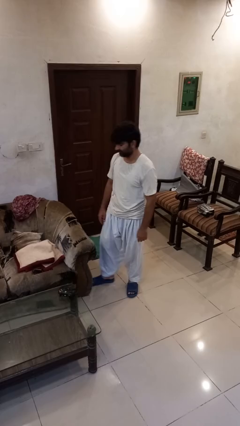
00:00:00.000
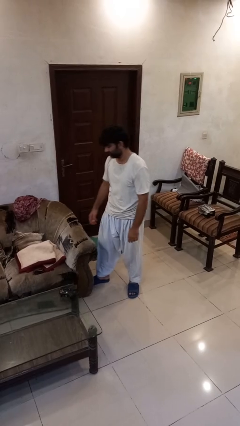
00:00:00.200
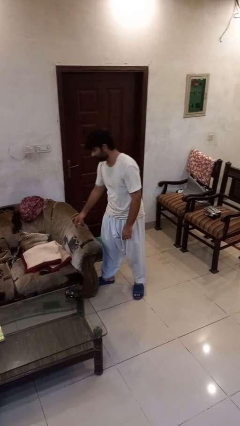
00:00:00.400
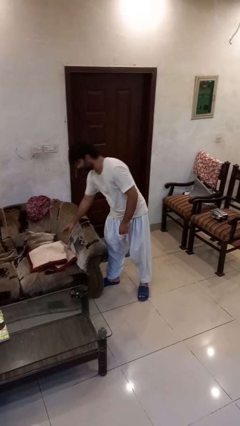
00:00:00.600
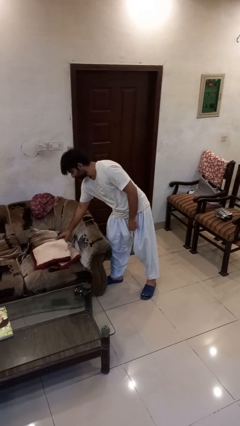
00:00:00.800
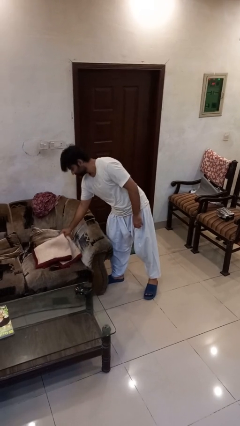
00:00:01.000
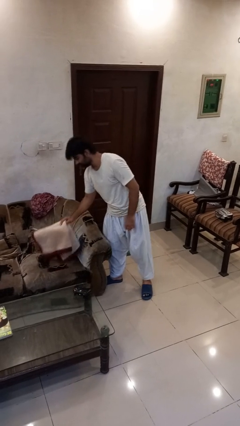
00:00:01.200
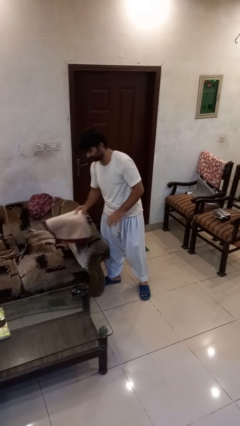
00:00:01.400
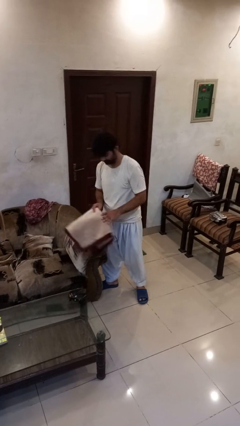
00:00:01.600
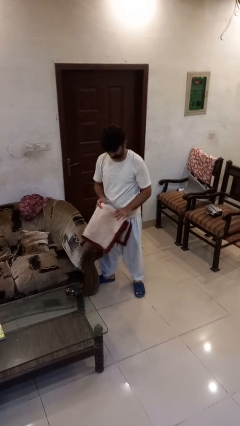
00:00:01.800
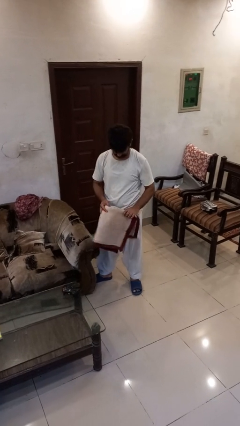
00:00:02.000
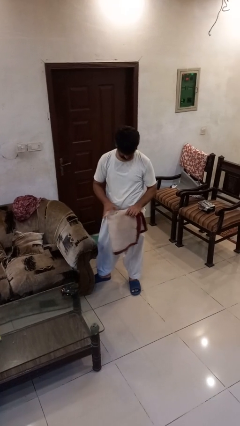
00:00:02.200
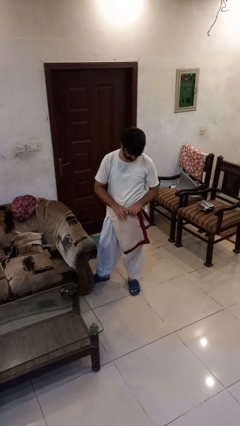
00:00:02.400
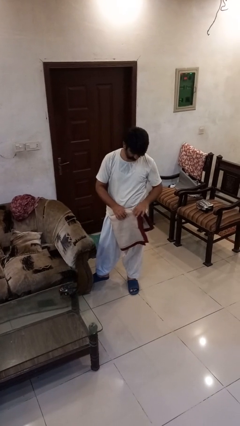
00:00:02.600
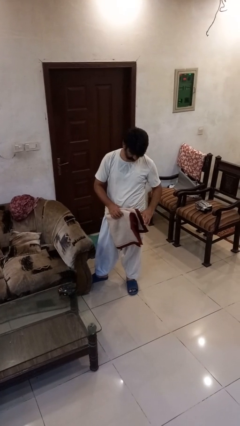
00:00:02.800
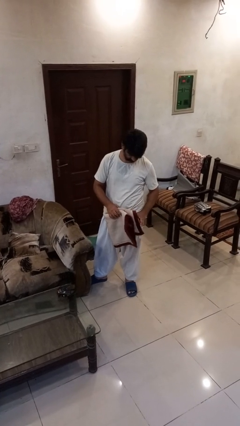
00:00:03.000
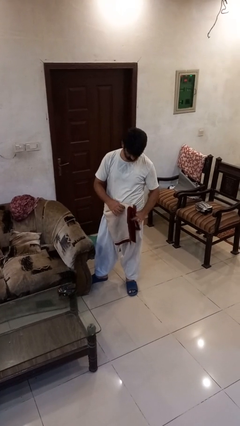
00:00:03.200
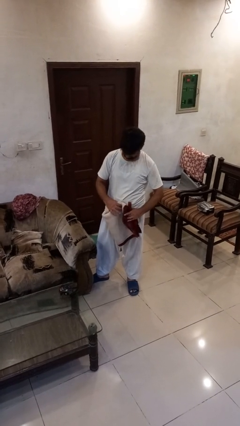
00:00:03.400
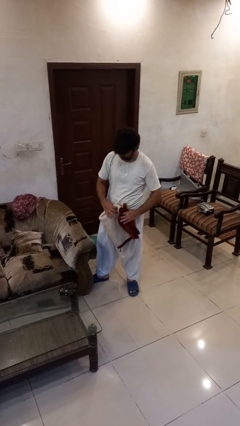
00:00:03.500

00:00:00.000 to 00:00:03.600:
person picks up object from couch

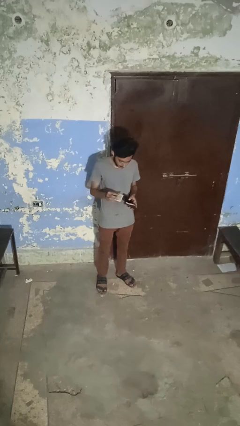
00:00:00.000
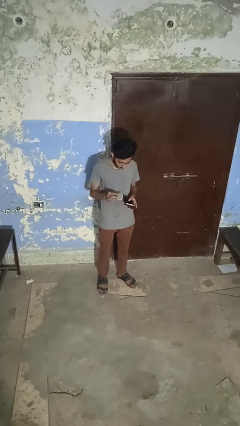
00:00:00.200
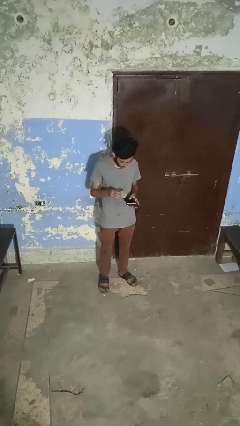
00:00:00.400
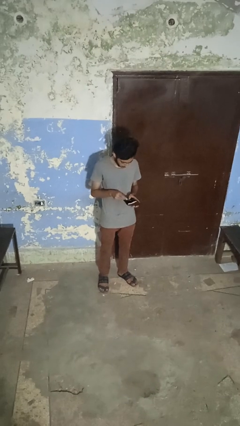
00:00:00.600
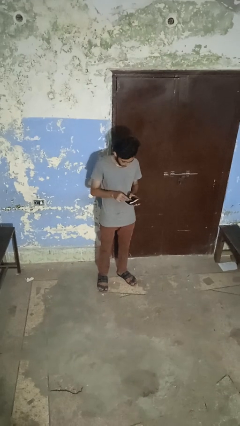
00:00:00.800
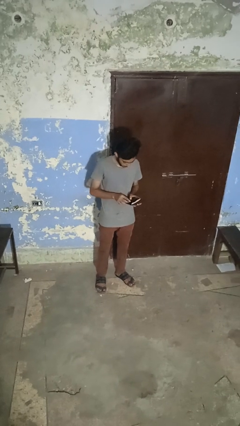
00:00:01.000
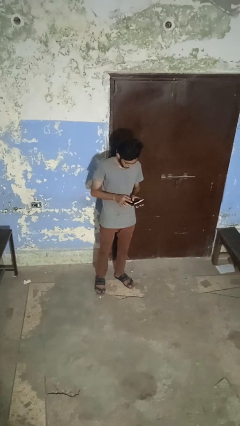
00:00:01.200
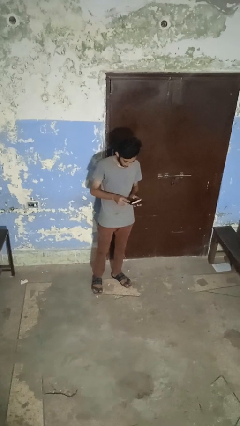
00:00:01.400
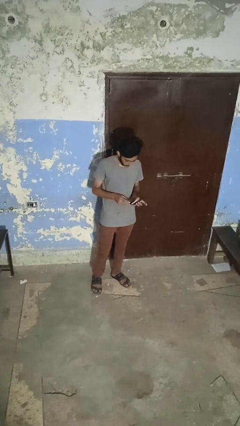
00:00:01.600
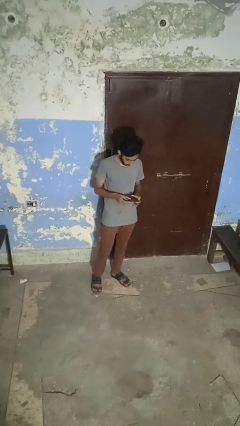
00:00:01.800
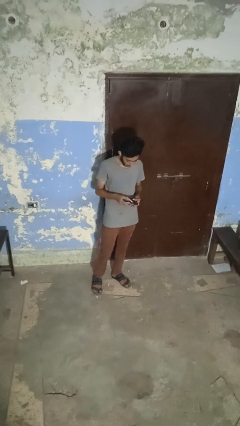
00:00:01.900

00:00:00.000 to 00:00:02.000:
person puts object into purse

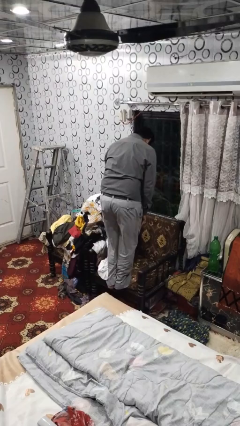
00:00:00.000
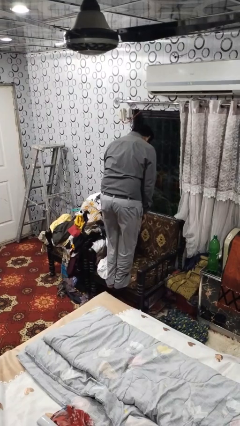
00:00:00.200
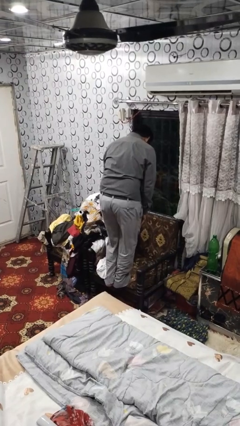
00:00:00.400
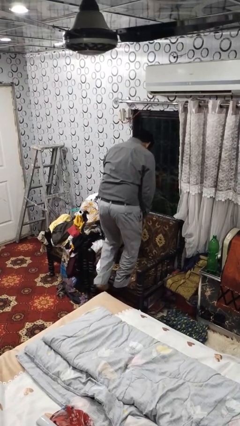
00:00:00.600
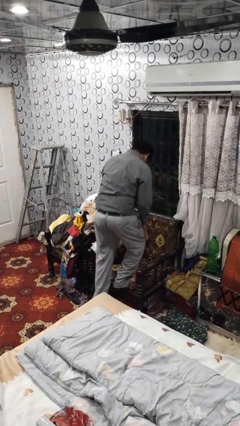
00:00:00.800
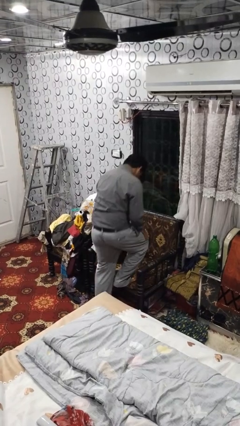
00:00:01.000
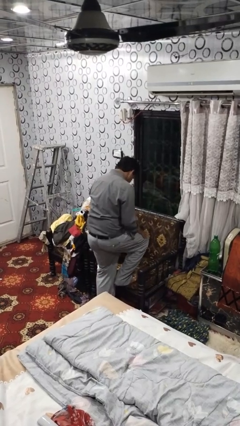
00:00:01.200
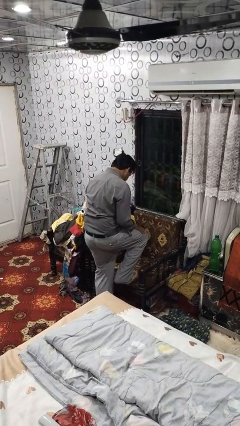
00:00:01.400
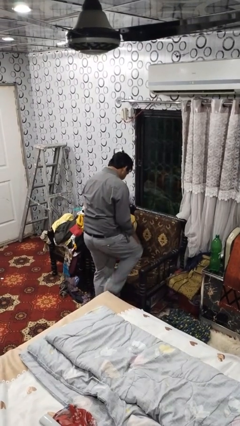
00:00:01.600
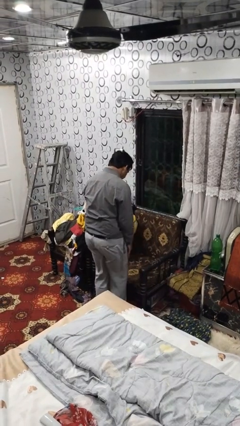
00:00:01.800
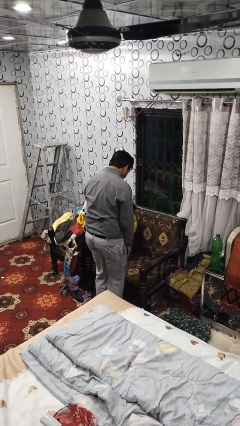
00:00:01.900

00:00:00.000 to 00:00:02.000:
person climbs off couch

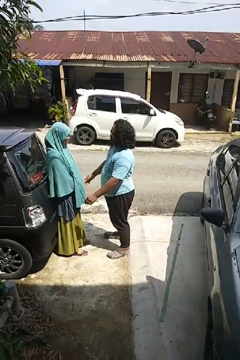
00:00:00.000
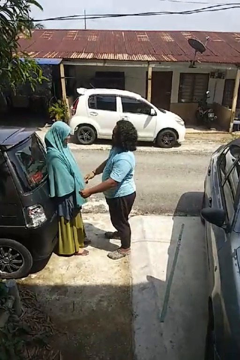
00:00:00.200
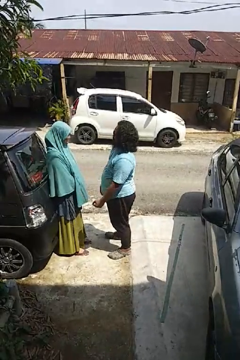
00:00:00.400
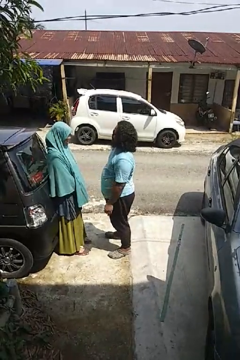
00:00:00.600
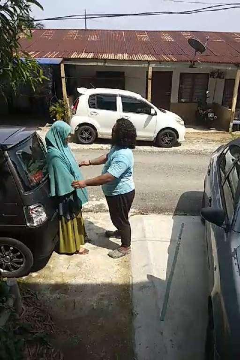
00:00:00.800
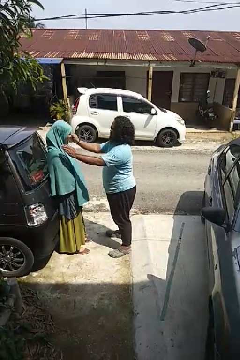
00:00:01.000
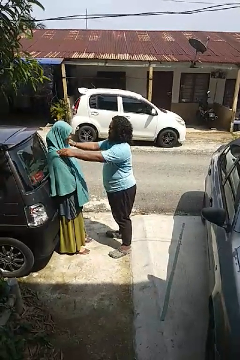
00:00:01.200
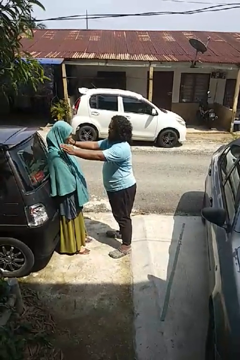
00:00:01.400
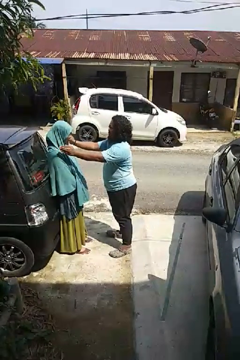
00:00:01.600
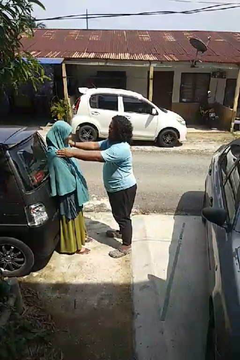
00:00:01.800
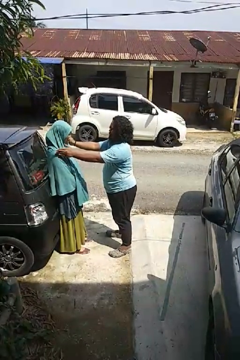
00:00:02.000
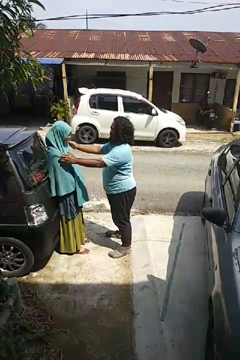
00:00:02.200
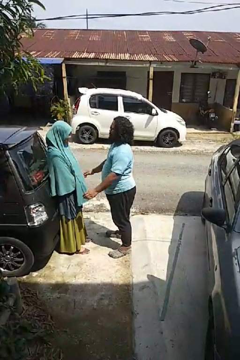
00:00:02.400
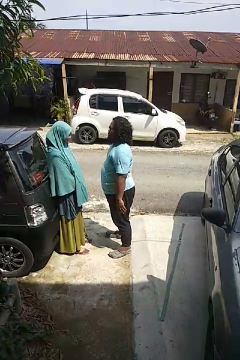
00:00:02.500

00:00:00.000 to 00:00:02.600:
person pounds shoulders of person

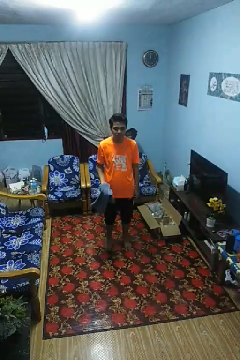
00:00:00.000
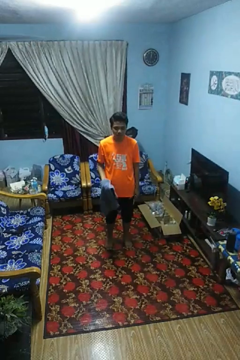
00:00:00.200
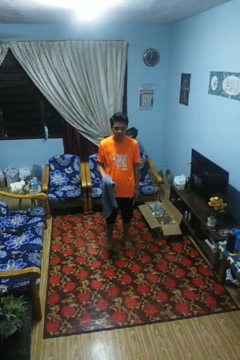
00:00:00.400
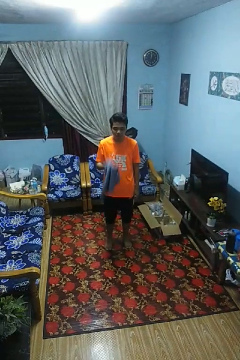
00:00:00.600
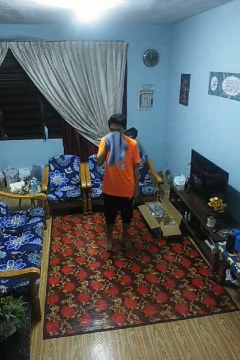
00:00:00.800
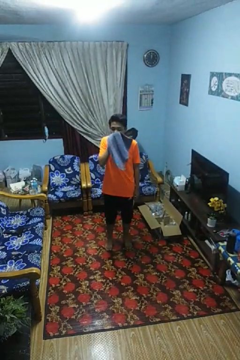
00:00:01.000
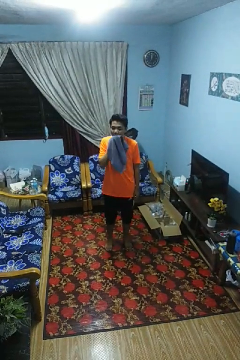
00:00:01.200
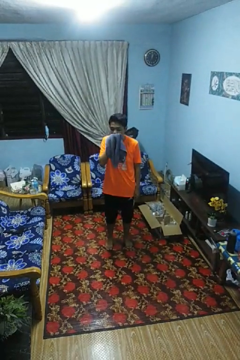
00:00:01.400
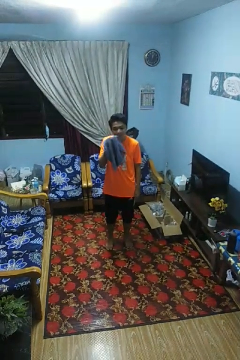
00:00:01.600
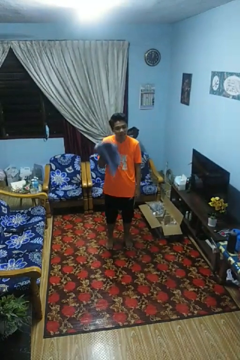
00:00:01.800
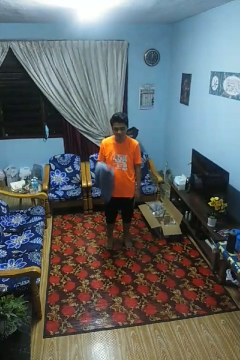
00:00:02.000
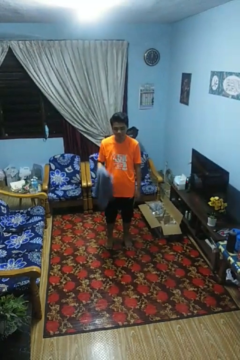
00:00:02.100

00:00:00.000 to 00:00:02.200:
person wipes mouth with napkin

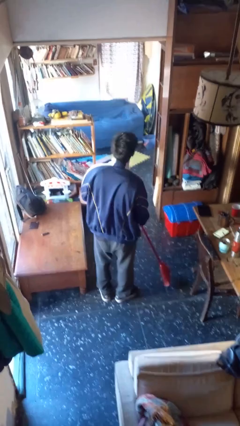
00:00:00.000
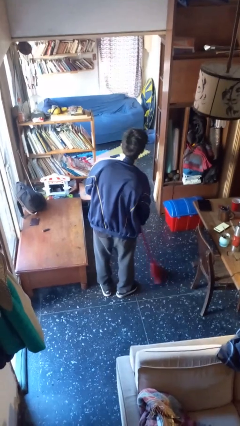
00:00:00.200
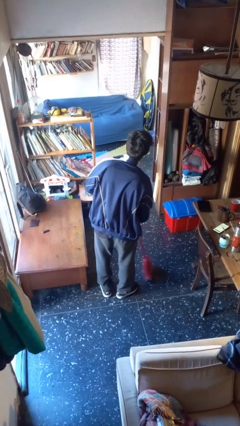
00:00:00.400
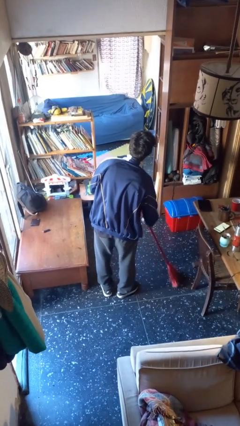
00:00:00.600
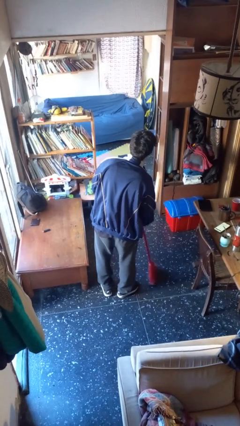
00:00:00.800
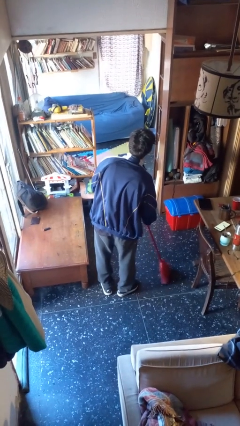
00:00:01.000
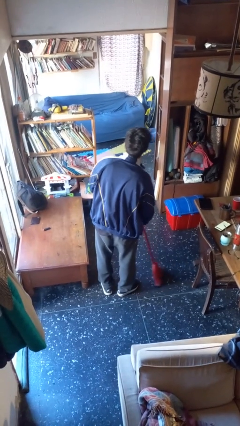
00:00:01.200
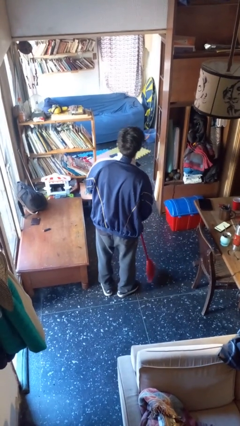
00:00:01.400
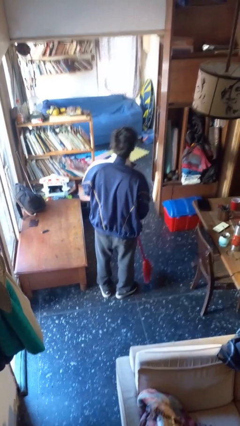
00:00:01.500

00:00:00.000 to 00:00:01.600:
person sweeps floor

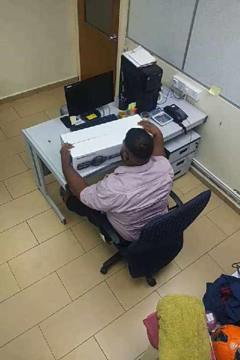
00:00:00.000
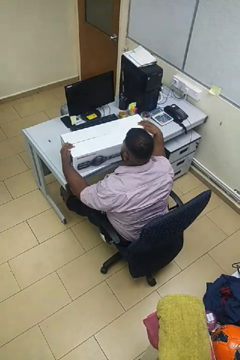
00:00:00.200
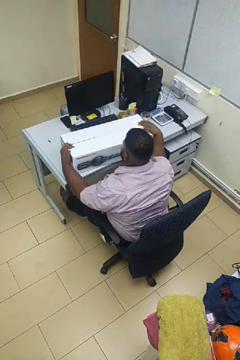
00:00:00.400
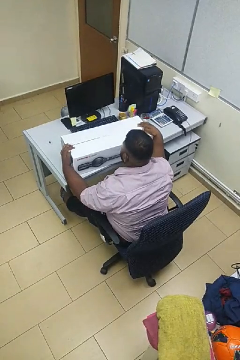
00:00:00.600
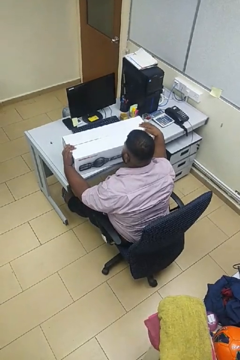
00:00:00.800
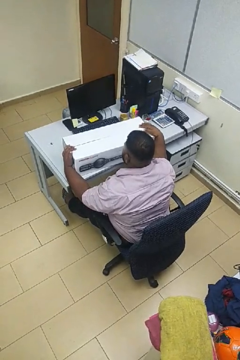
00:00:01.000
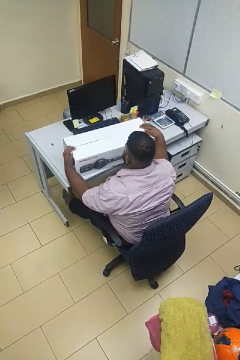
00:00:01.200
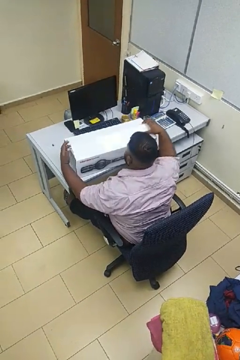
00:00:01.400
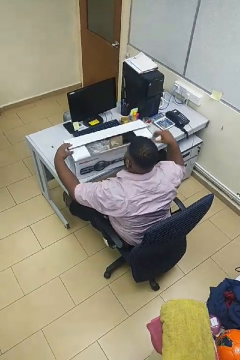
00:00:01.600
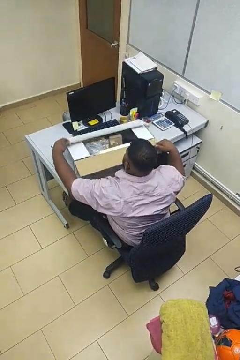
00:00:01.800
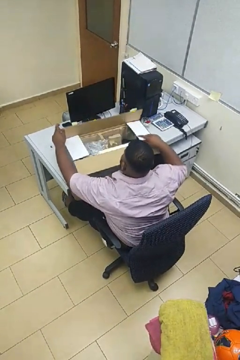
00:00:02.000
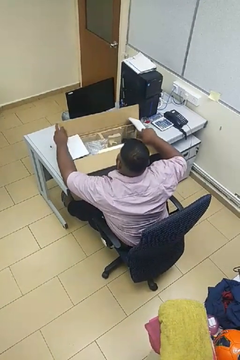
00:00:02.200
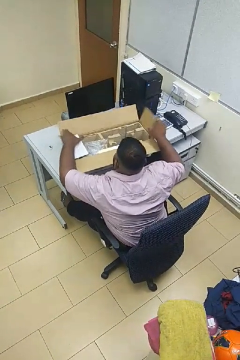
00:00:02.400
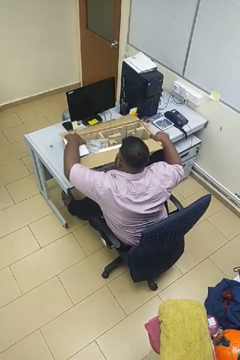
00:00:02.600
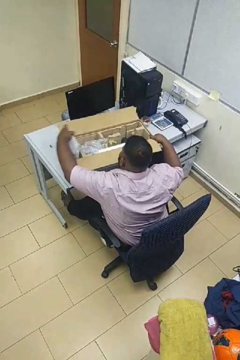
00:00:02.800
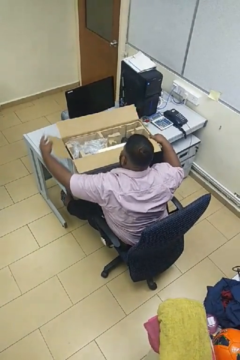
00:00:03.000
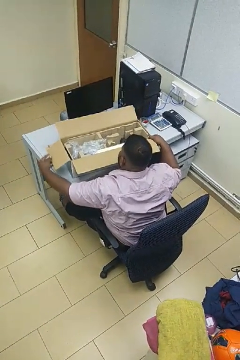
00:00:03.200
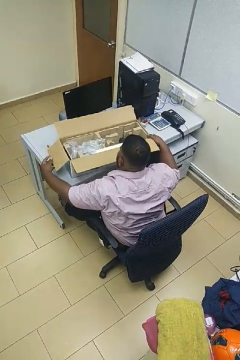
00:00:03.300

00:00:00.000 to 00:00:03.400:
person opens box

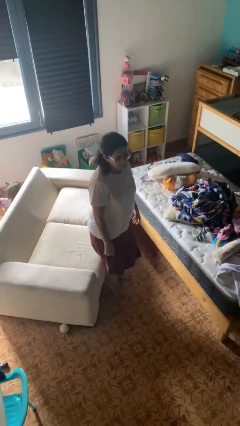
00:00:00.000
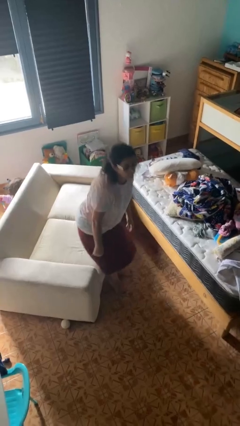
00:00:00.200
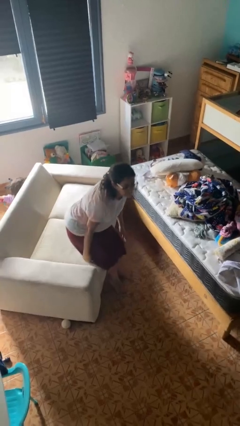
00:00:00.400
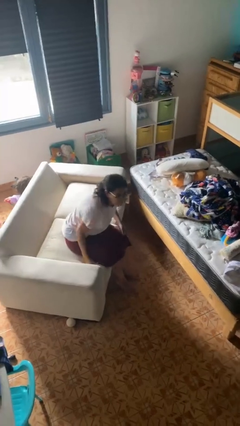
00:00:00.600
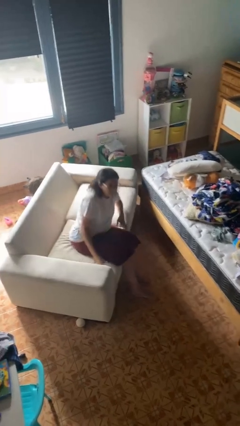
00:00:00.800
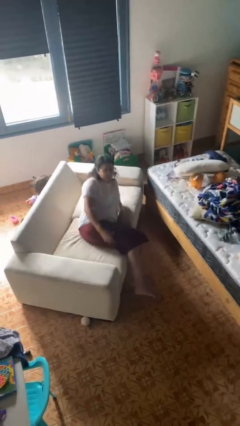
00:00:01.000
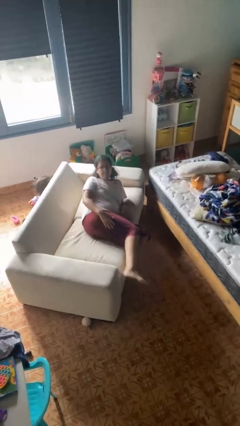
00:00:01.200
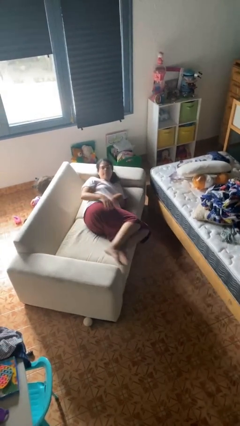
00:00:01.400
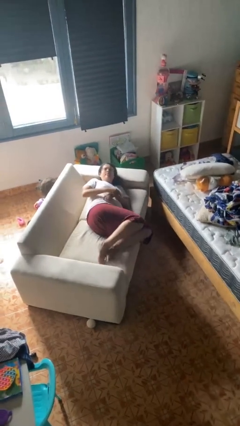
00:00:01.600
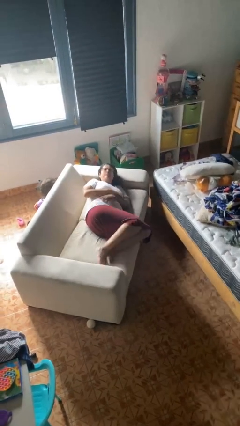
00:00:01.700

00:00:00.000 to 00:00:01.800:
person lies down on couch
